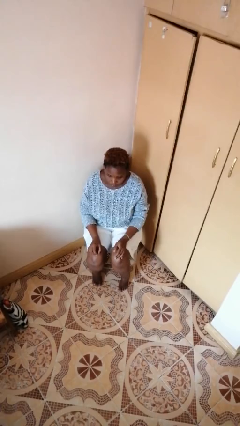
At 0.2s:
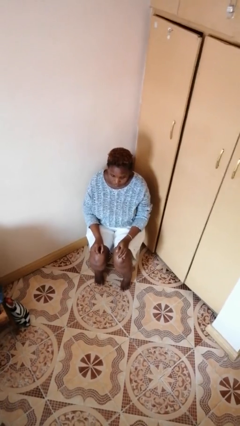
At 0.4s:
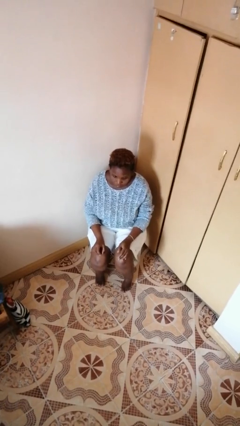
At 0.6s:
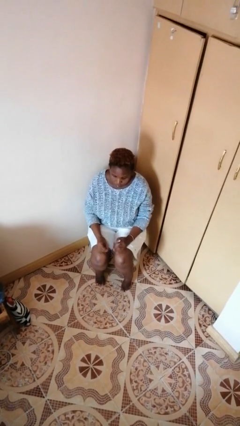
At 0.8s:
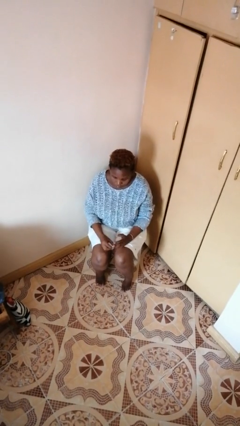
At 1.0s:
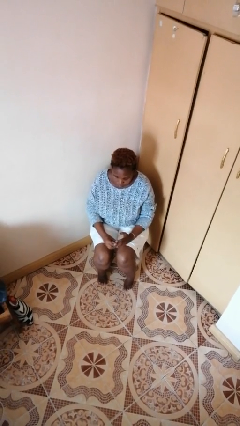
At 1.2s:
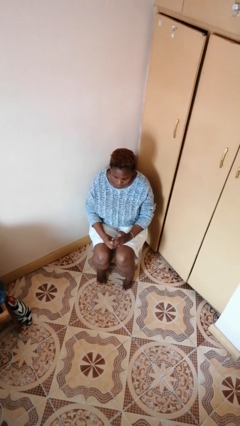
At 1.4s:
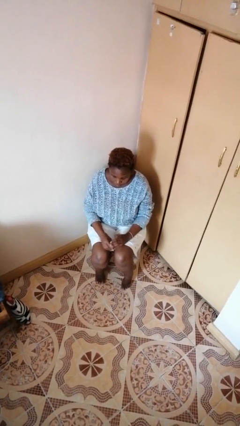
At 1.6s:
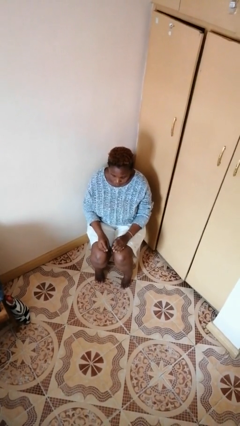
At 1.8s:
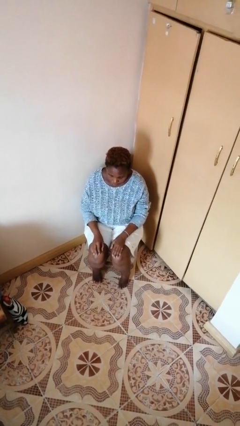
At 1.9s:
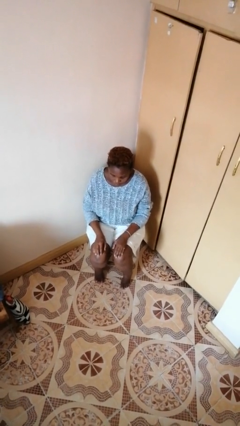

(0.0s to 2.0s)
person puts on ring

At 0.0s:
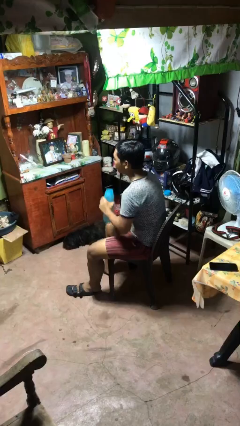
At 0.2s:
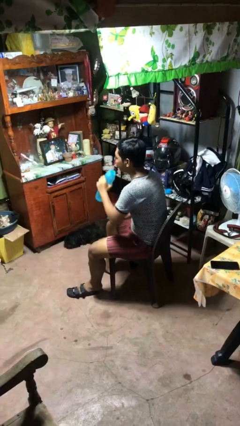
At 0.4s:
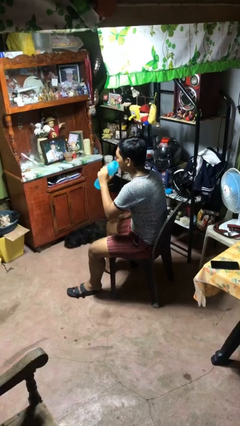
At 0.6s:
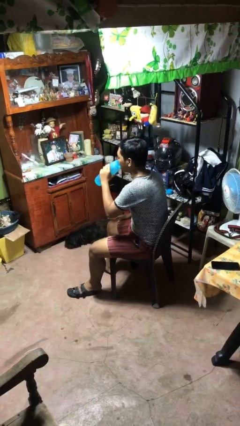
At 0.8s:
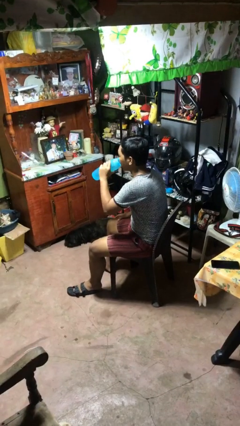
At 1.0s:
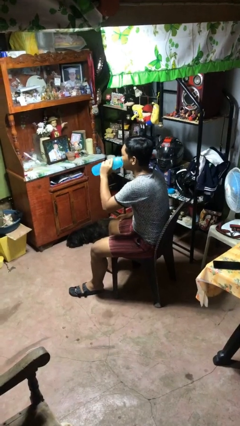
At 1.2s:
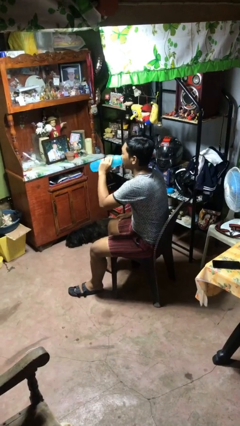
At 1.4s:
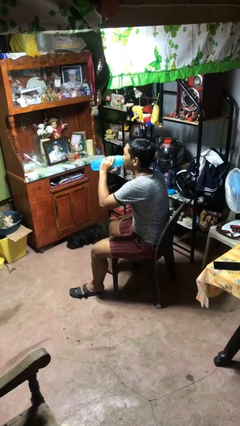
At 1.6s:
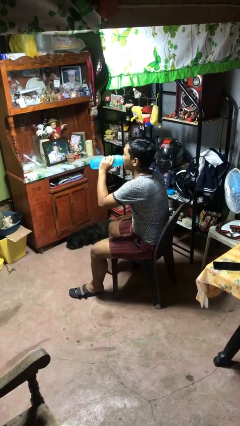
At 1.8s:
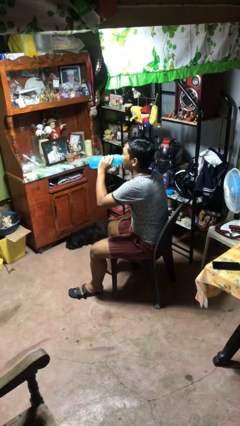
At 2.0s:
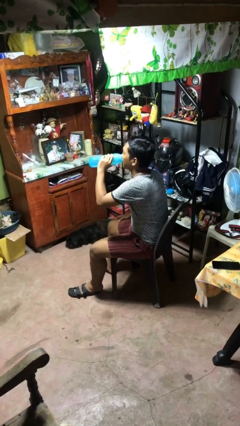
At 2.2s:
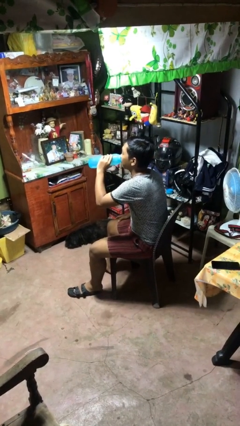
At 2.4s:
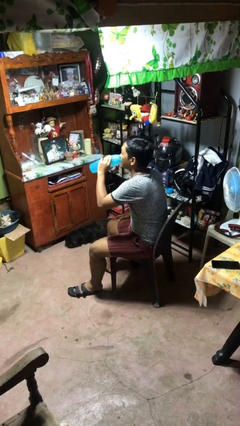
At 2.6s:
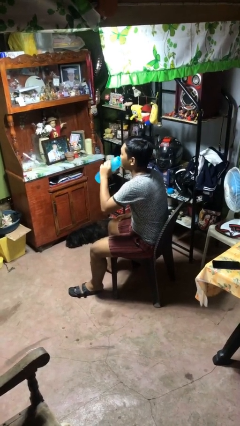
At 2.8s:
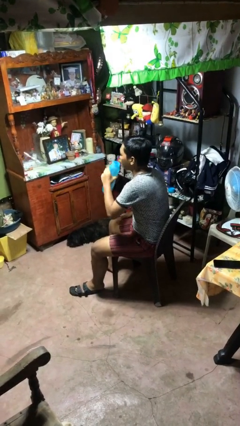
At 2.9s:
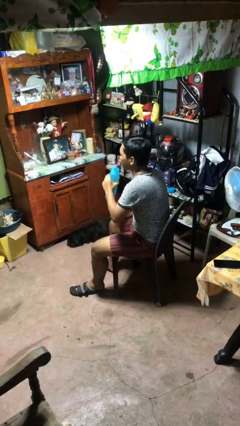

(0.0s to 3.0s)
person drinks from bottle

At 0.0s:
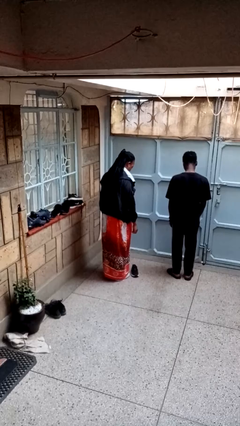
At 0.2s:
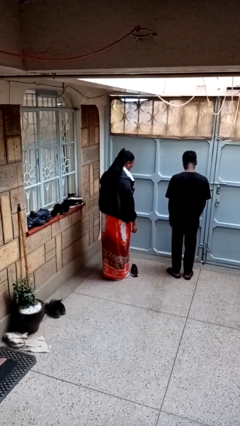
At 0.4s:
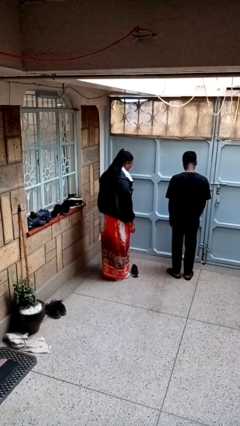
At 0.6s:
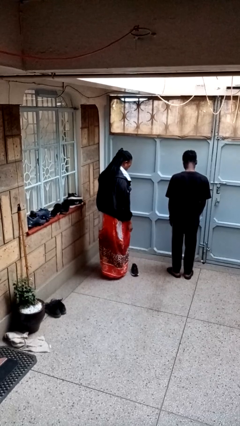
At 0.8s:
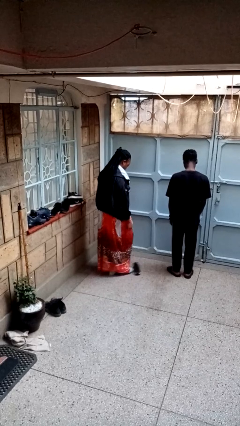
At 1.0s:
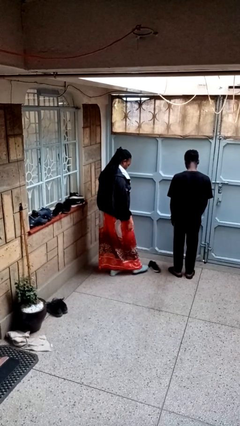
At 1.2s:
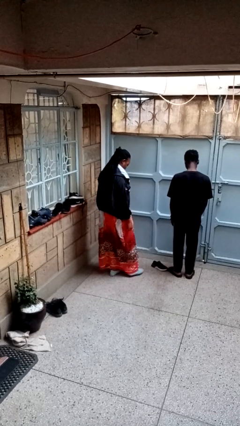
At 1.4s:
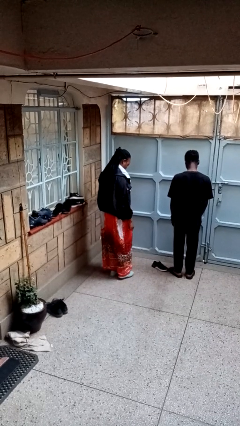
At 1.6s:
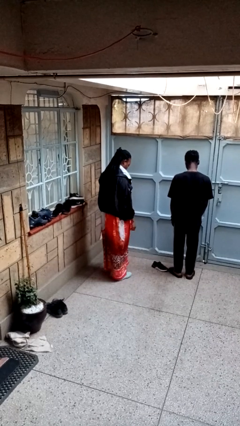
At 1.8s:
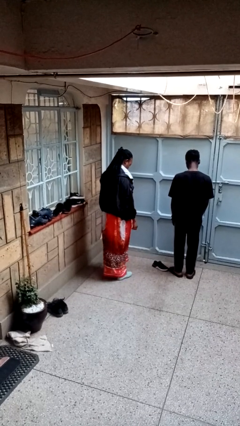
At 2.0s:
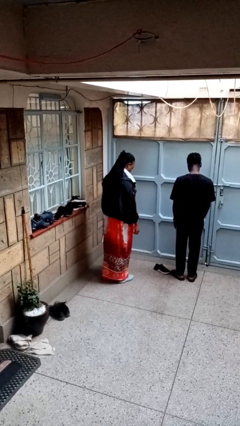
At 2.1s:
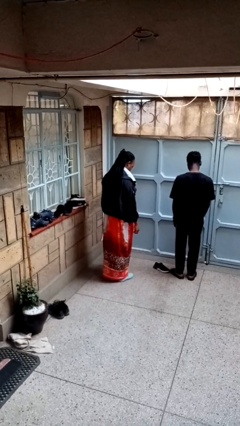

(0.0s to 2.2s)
person kicks object to person

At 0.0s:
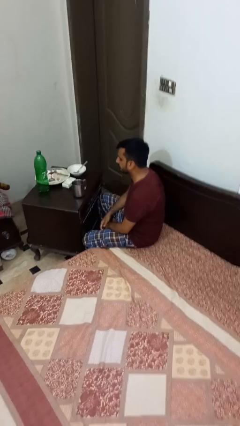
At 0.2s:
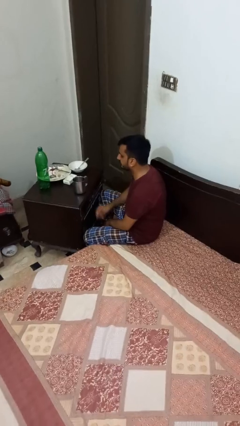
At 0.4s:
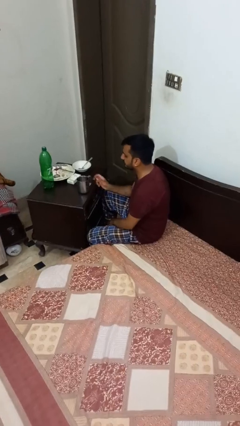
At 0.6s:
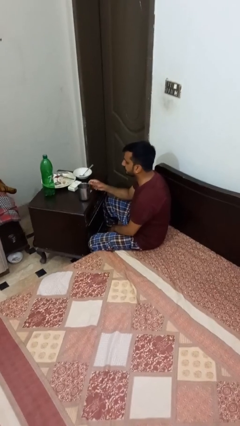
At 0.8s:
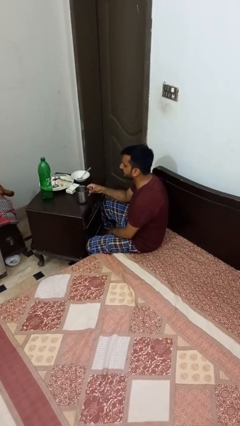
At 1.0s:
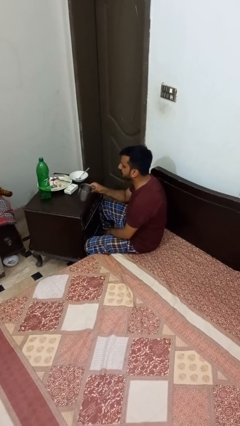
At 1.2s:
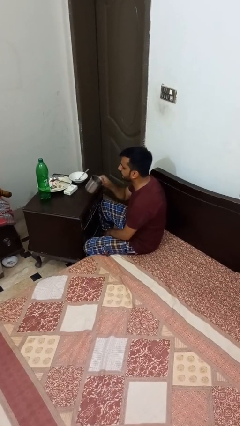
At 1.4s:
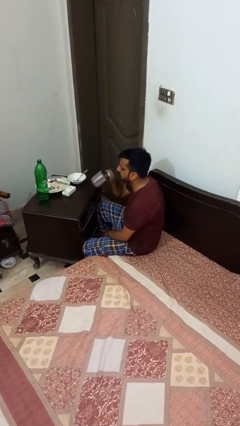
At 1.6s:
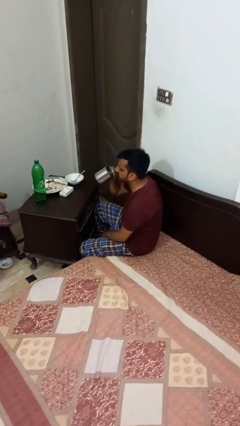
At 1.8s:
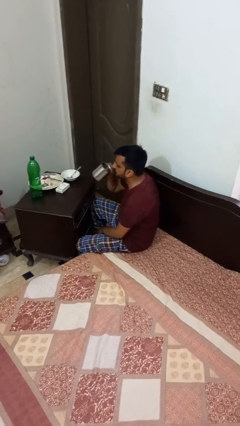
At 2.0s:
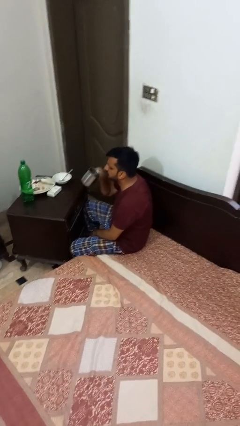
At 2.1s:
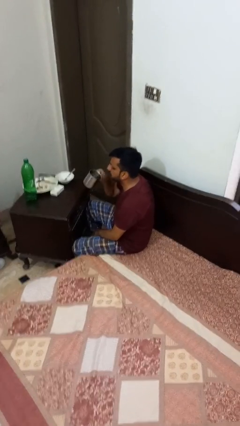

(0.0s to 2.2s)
person picks up object from table

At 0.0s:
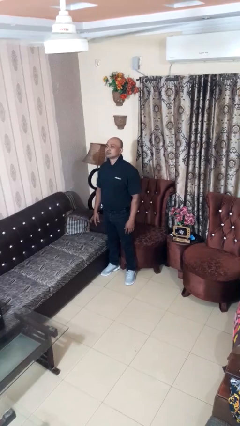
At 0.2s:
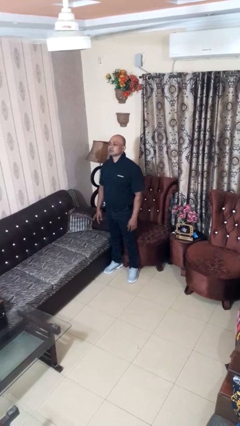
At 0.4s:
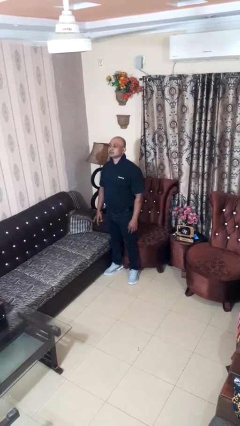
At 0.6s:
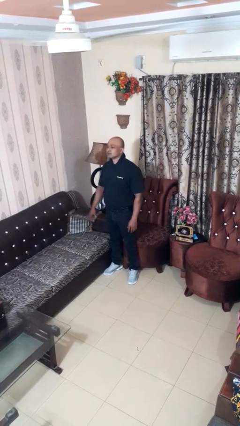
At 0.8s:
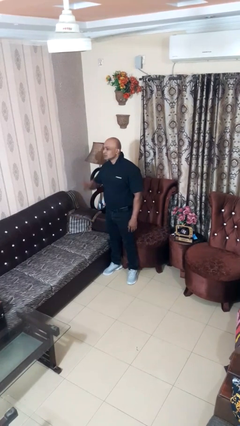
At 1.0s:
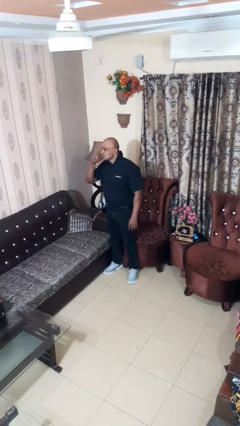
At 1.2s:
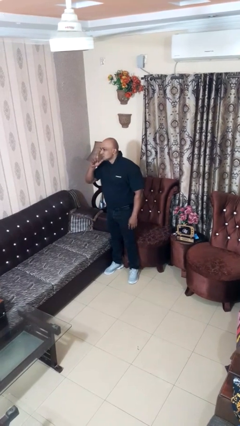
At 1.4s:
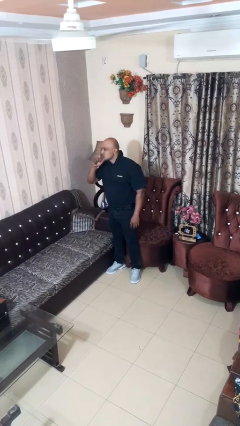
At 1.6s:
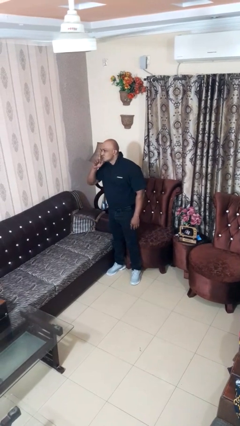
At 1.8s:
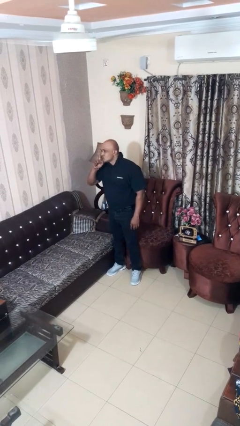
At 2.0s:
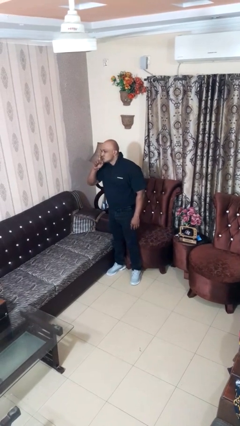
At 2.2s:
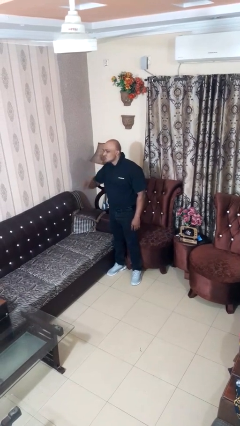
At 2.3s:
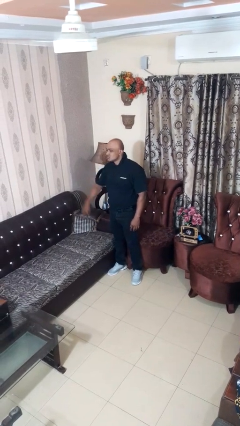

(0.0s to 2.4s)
person gestures be quiet

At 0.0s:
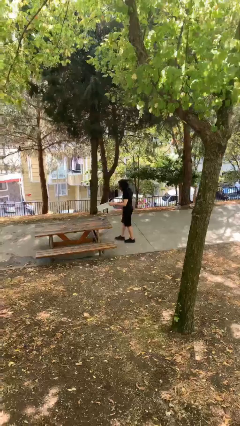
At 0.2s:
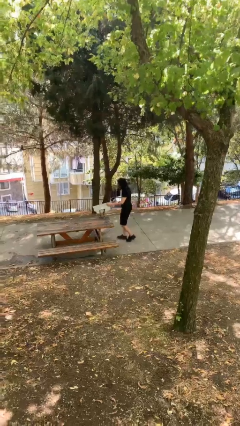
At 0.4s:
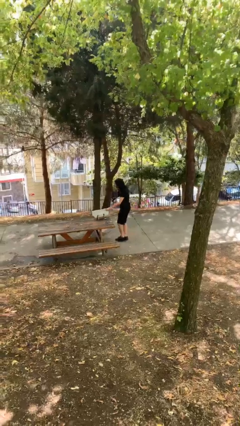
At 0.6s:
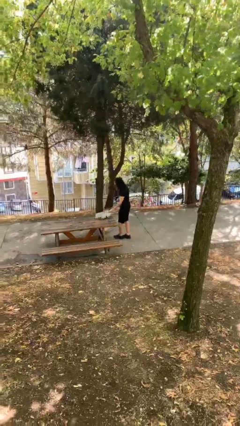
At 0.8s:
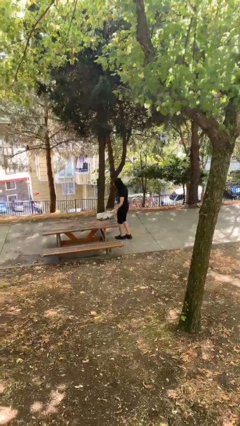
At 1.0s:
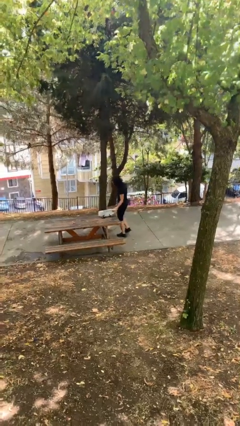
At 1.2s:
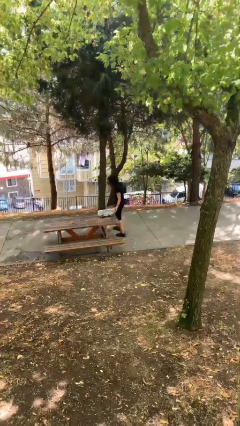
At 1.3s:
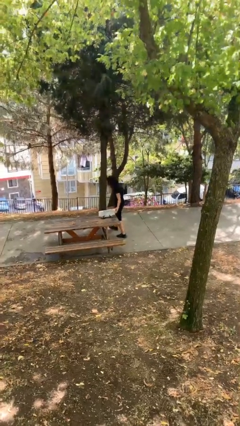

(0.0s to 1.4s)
person puts down object on table

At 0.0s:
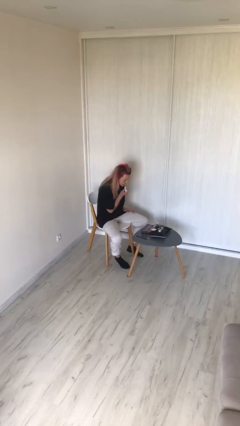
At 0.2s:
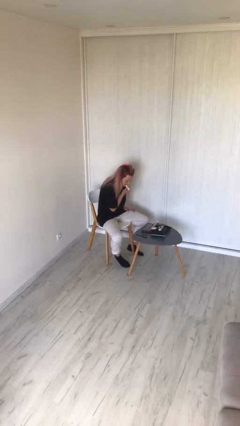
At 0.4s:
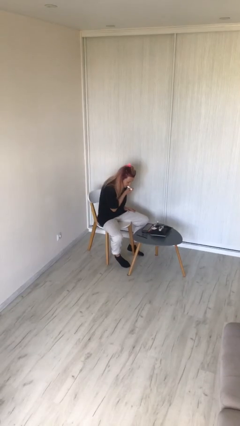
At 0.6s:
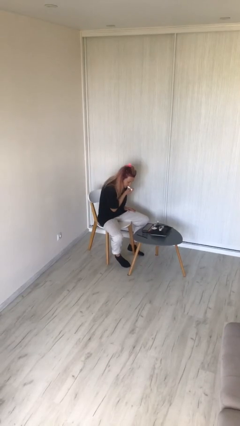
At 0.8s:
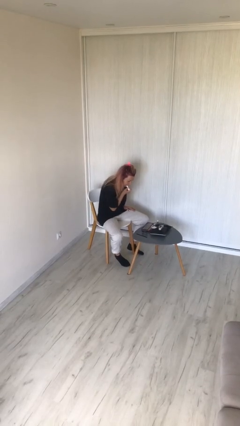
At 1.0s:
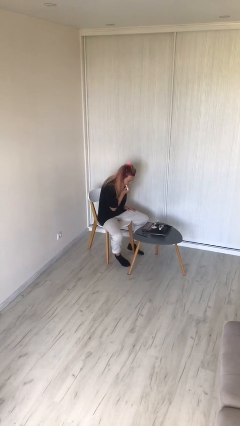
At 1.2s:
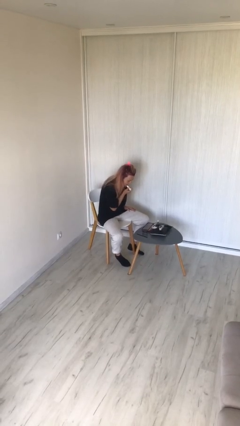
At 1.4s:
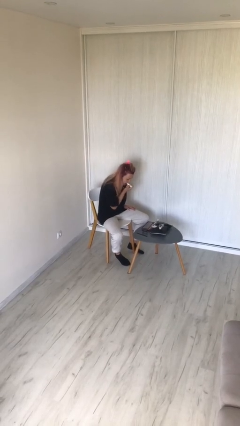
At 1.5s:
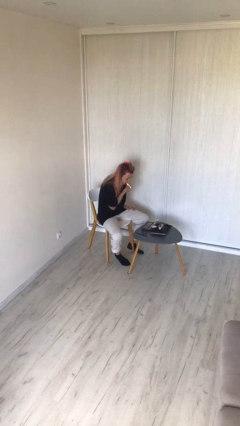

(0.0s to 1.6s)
person applies lip makeup

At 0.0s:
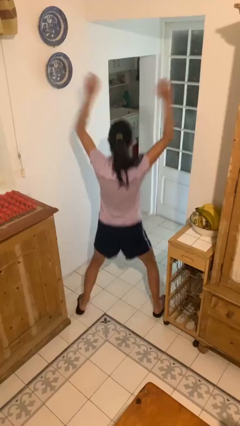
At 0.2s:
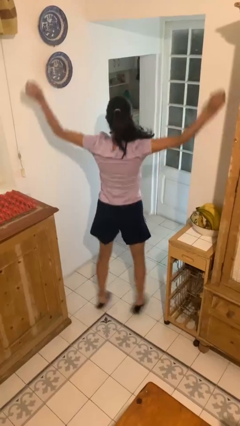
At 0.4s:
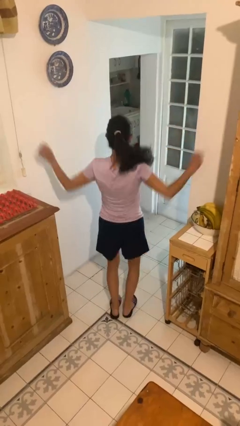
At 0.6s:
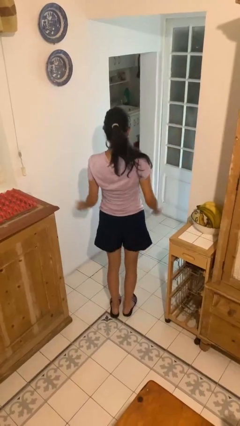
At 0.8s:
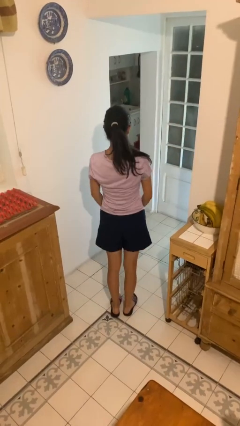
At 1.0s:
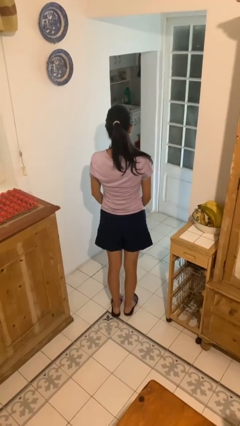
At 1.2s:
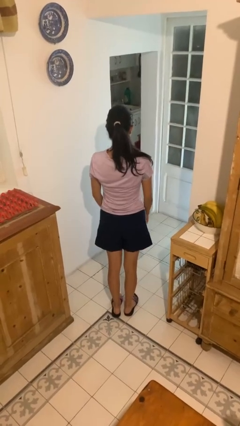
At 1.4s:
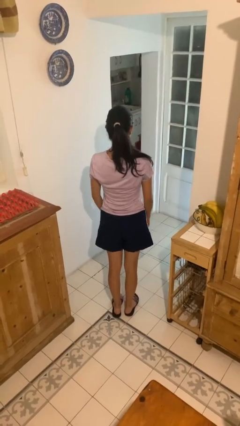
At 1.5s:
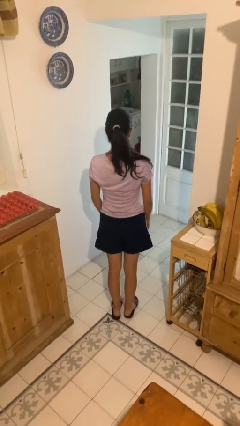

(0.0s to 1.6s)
person exercises with jumping jacks

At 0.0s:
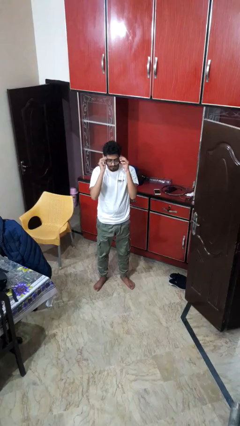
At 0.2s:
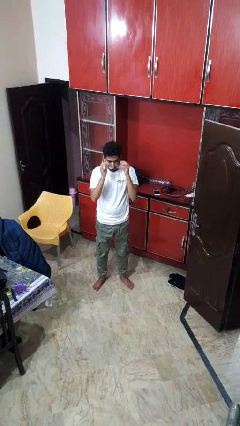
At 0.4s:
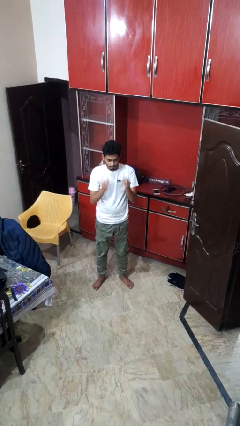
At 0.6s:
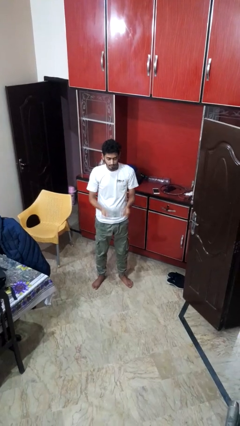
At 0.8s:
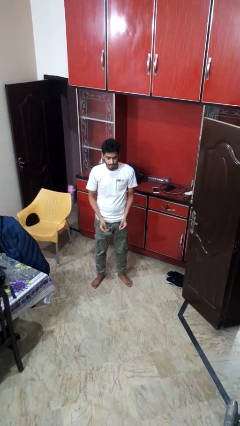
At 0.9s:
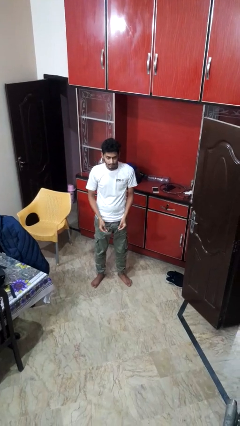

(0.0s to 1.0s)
person takes off glasses
